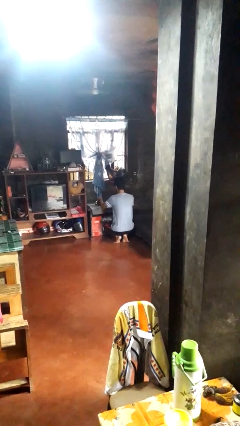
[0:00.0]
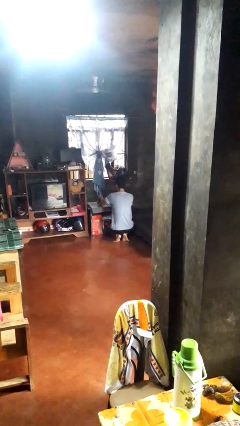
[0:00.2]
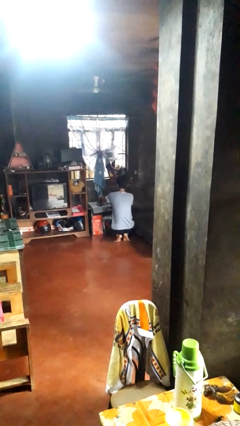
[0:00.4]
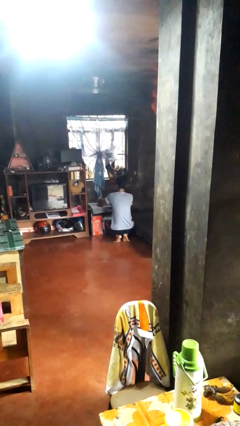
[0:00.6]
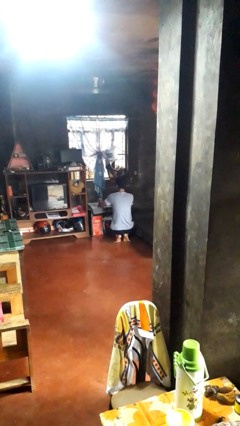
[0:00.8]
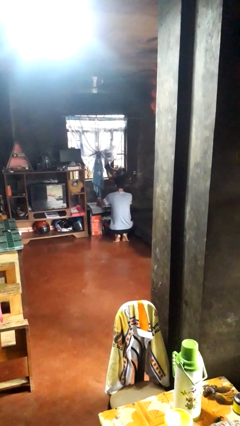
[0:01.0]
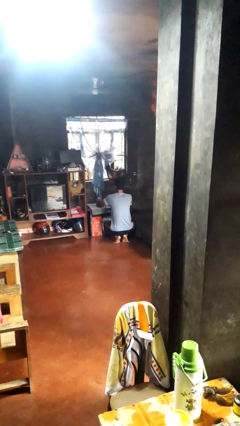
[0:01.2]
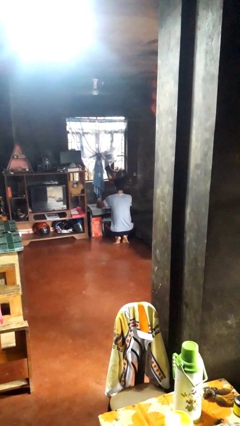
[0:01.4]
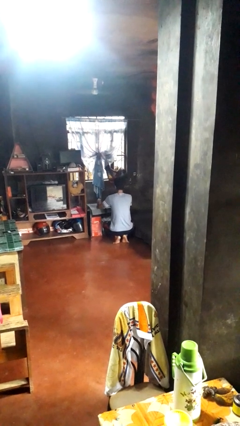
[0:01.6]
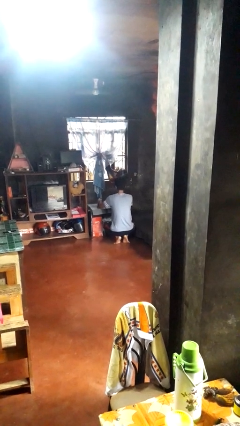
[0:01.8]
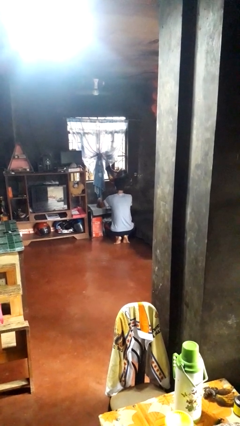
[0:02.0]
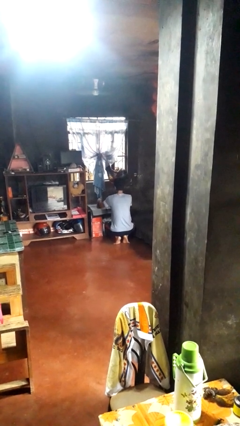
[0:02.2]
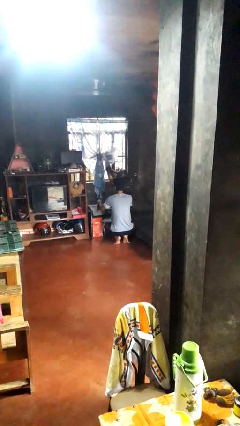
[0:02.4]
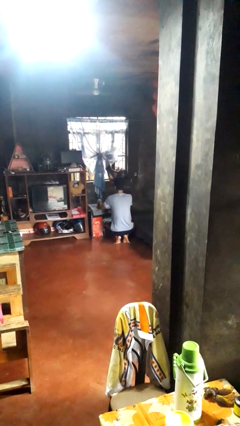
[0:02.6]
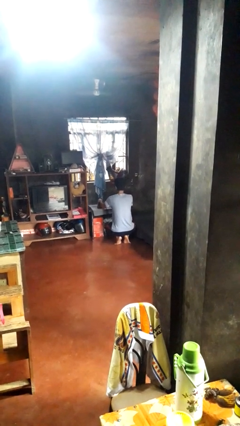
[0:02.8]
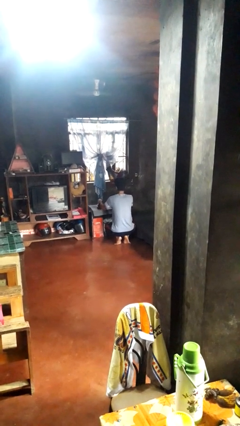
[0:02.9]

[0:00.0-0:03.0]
person irons clothes

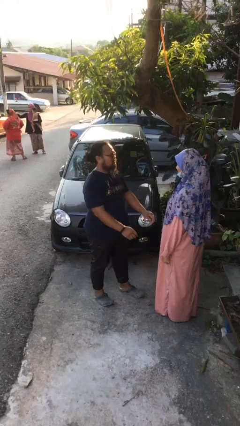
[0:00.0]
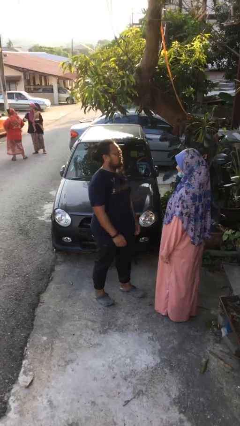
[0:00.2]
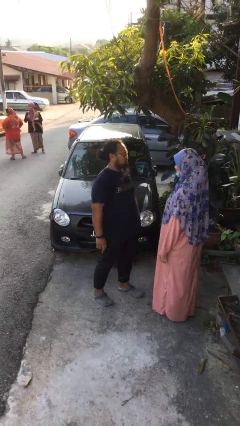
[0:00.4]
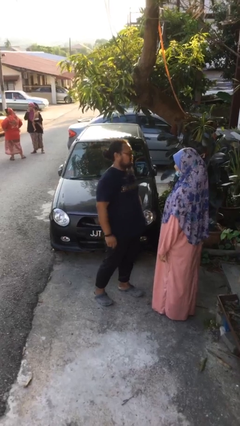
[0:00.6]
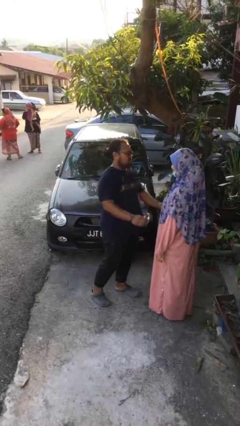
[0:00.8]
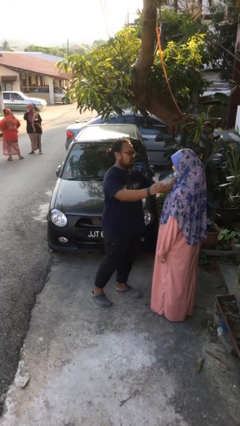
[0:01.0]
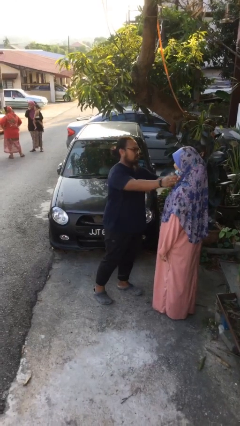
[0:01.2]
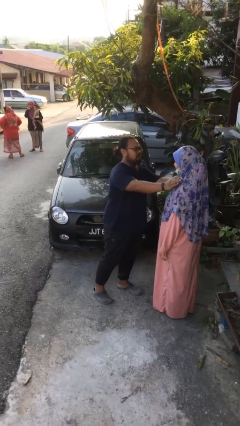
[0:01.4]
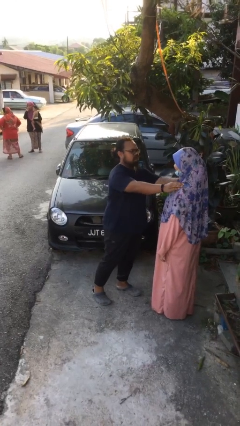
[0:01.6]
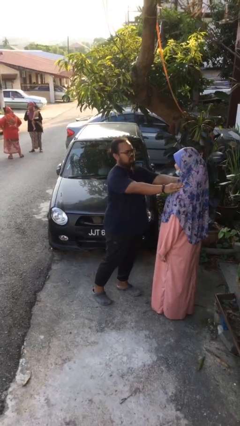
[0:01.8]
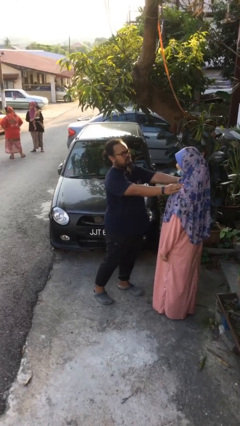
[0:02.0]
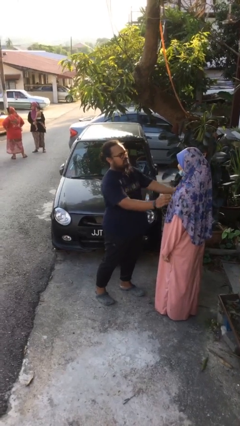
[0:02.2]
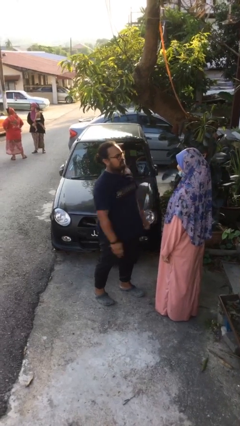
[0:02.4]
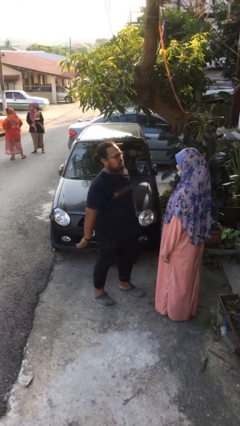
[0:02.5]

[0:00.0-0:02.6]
person pounds shoulders of person

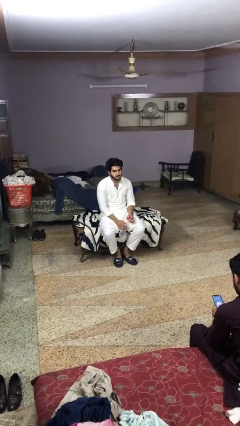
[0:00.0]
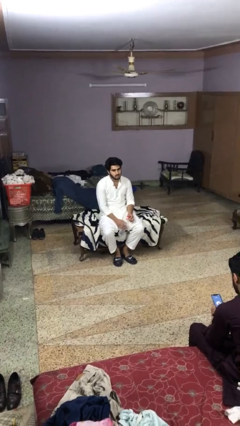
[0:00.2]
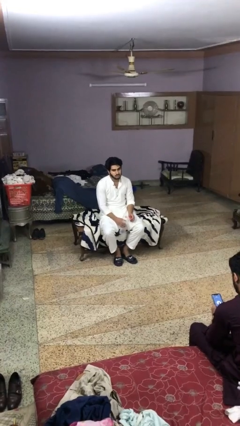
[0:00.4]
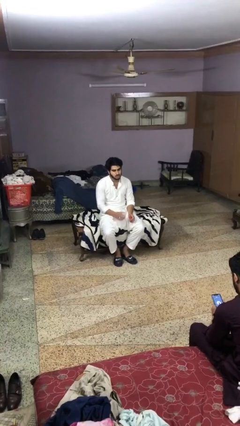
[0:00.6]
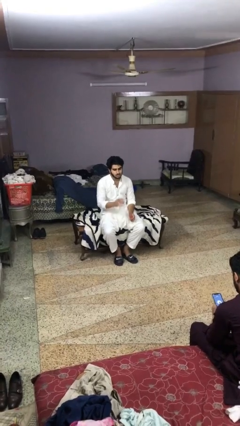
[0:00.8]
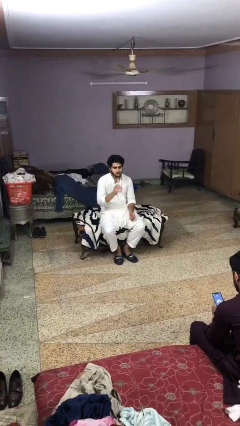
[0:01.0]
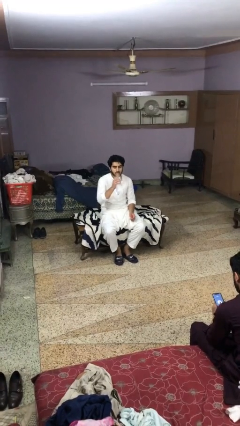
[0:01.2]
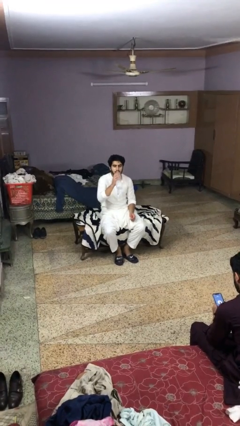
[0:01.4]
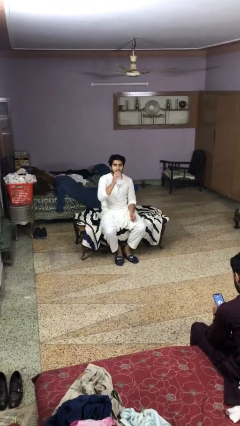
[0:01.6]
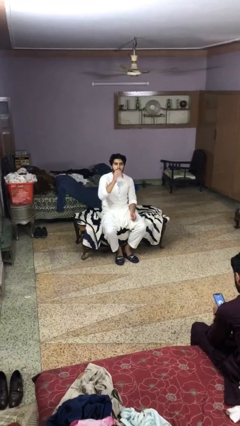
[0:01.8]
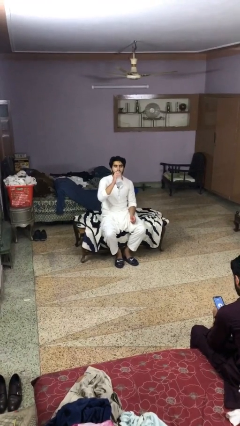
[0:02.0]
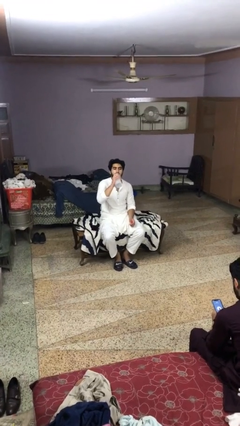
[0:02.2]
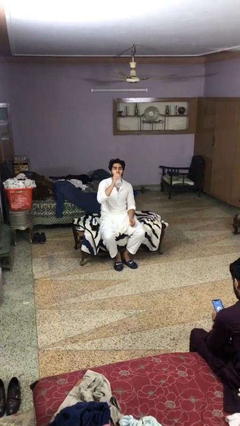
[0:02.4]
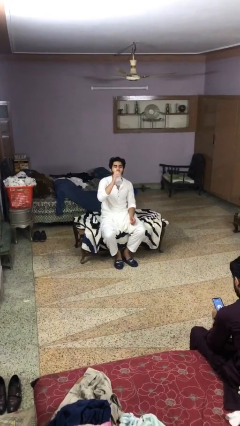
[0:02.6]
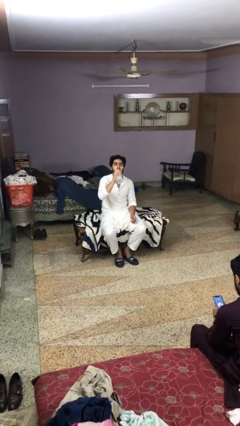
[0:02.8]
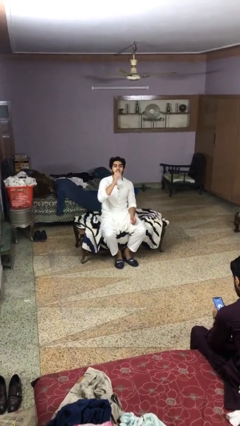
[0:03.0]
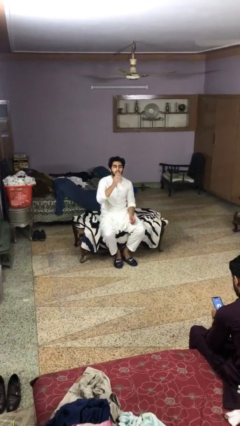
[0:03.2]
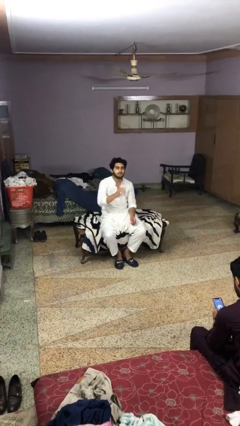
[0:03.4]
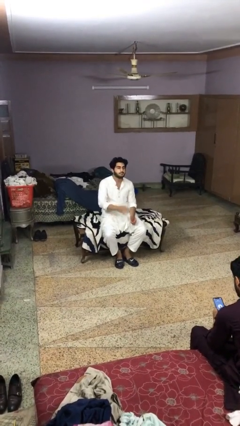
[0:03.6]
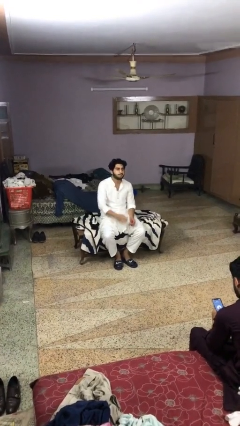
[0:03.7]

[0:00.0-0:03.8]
person drinks from bottle

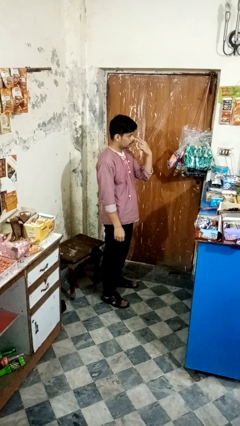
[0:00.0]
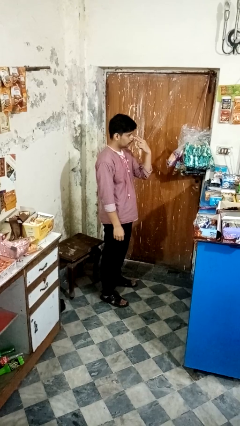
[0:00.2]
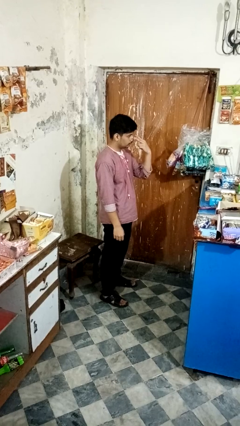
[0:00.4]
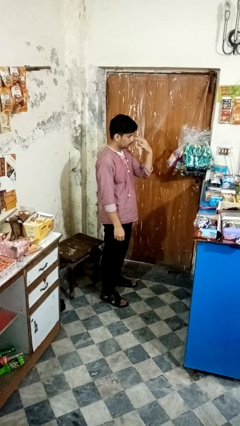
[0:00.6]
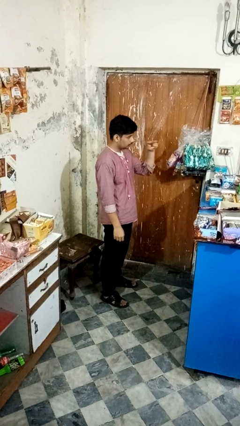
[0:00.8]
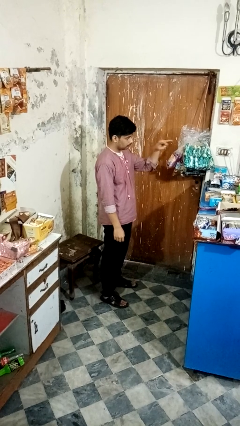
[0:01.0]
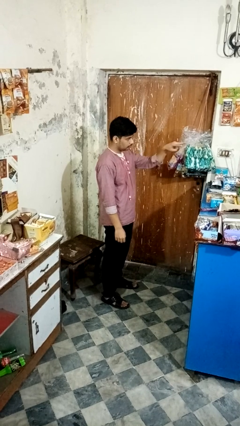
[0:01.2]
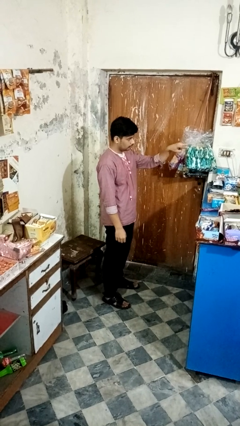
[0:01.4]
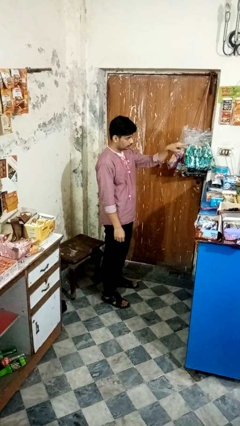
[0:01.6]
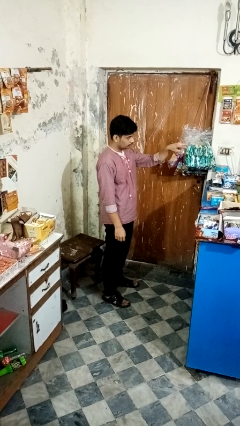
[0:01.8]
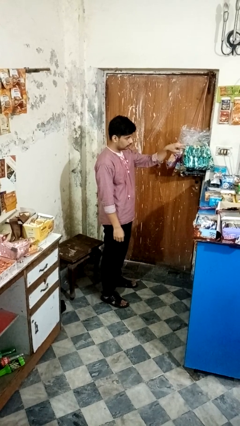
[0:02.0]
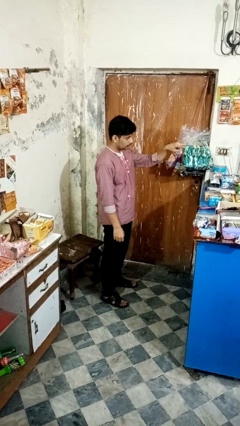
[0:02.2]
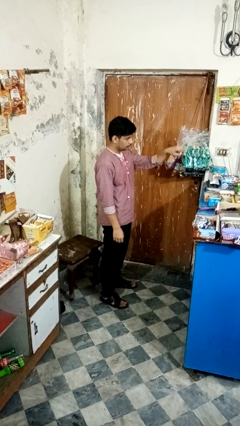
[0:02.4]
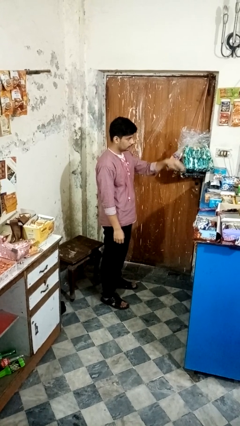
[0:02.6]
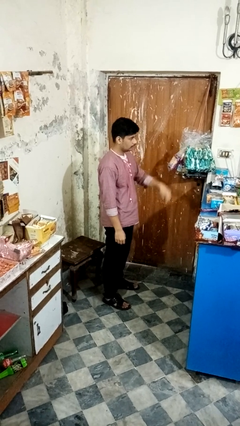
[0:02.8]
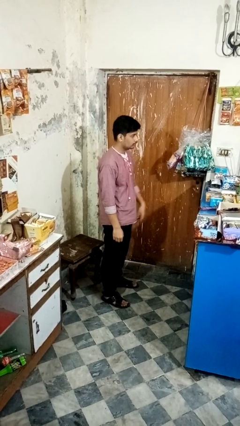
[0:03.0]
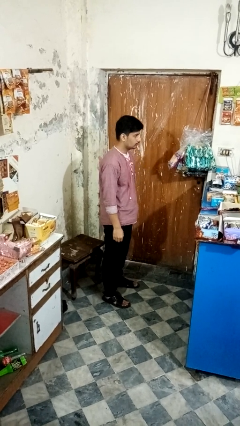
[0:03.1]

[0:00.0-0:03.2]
person gestures watch closely

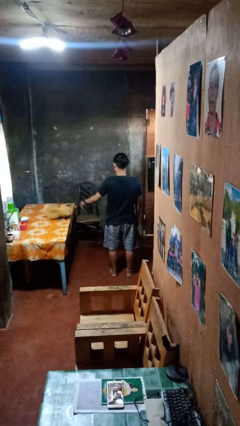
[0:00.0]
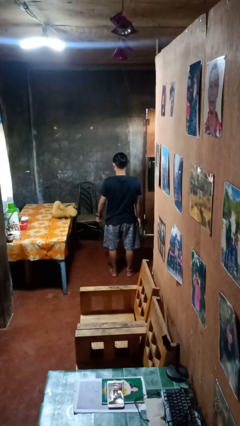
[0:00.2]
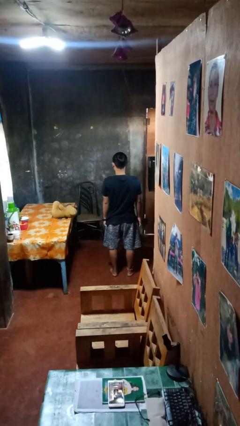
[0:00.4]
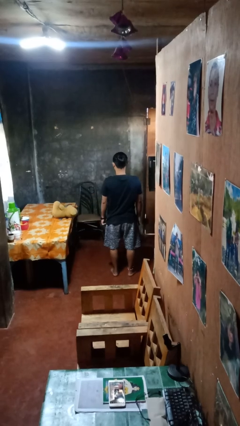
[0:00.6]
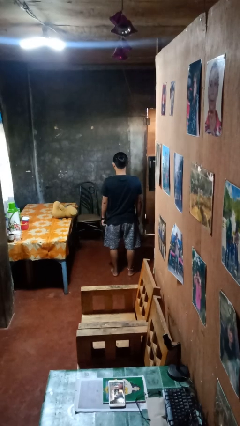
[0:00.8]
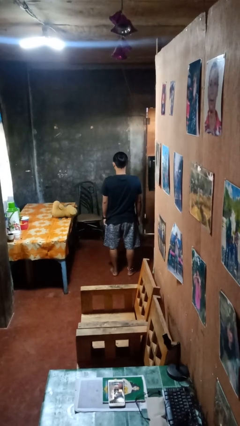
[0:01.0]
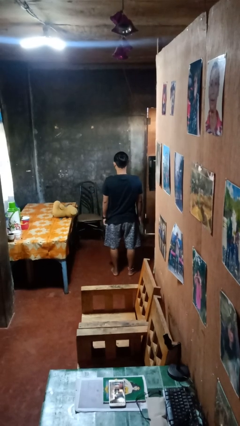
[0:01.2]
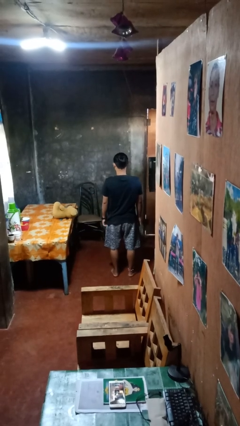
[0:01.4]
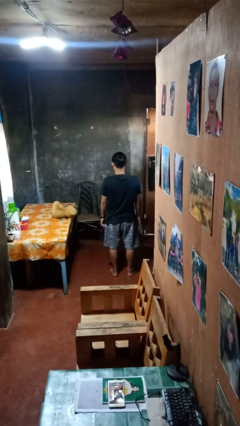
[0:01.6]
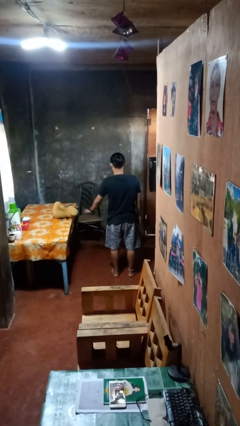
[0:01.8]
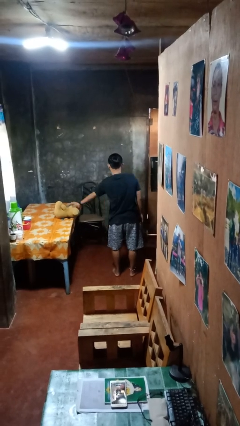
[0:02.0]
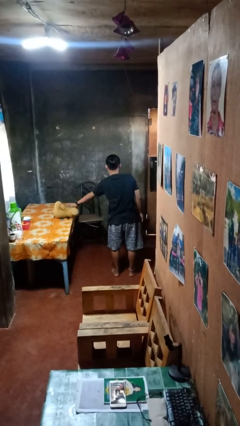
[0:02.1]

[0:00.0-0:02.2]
person throws object on table

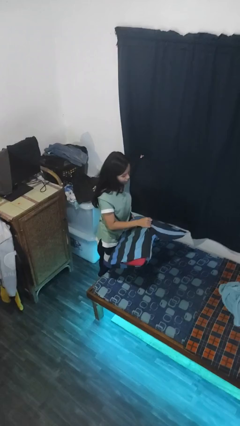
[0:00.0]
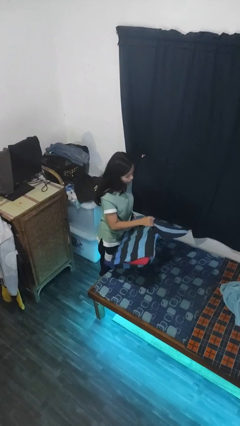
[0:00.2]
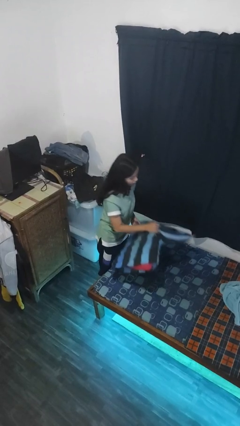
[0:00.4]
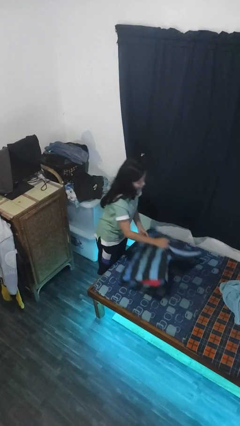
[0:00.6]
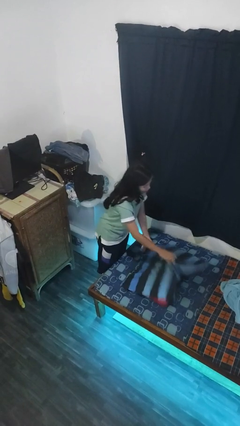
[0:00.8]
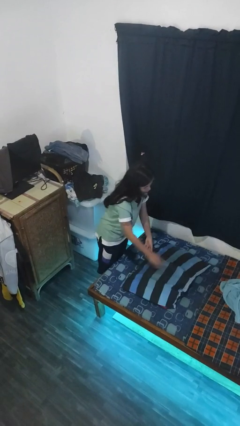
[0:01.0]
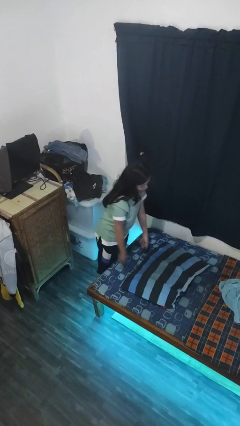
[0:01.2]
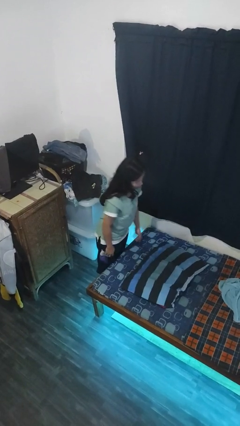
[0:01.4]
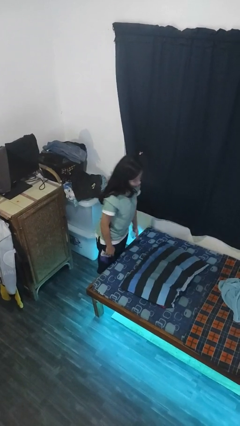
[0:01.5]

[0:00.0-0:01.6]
person puts down object on bed

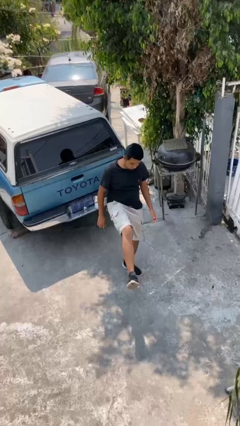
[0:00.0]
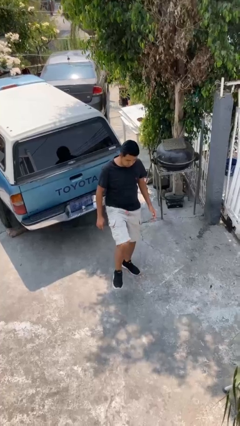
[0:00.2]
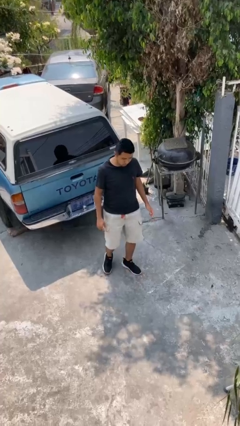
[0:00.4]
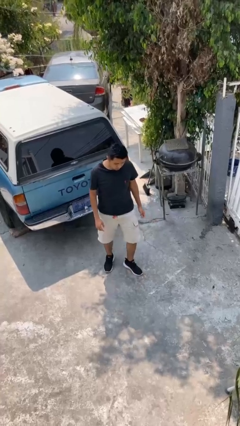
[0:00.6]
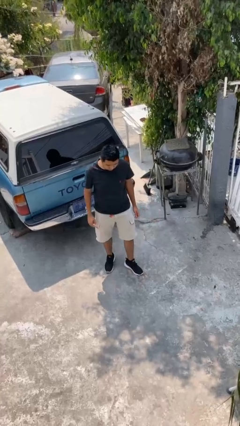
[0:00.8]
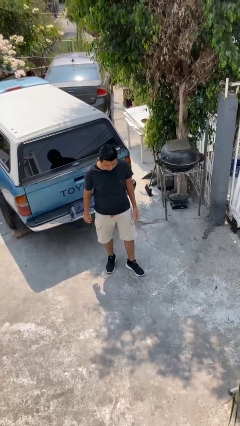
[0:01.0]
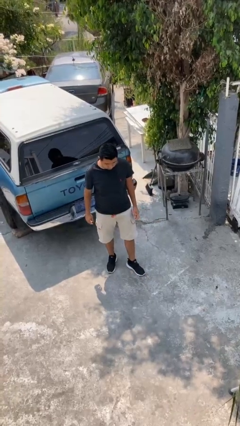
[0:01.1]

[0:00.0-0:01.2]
person karate kicks
